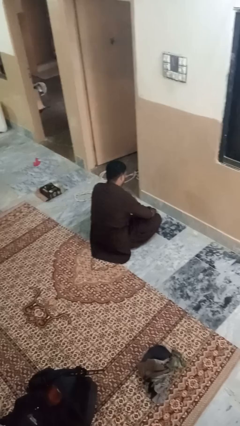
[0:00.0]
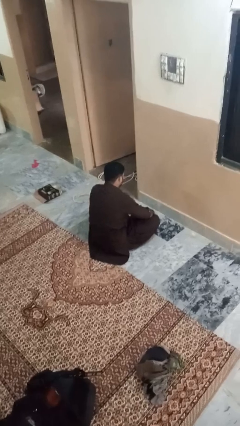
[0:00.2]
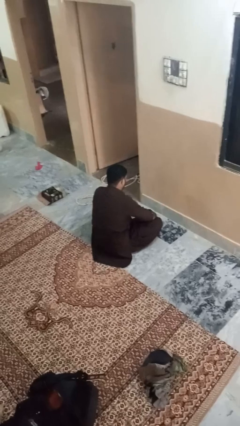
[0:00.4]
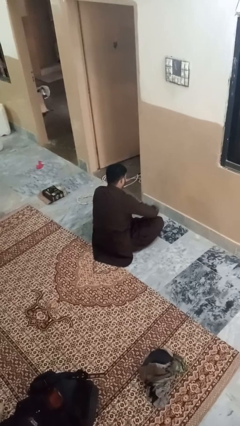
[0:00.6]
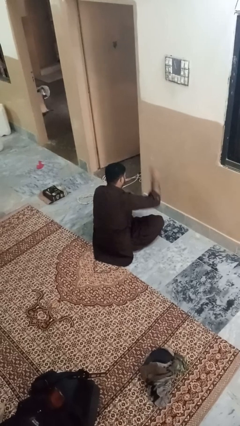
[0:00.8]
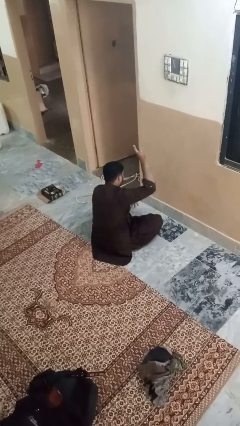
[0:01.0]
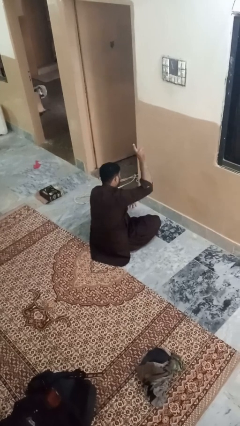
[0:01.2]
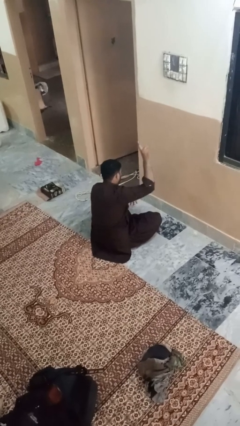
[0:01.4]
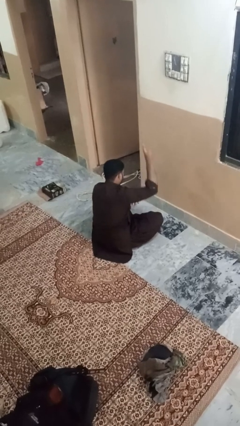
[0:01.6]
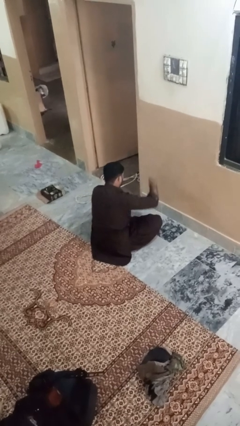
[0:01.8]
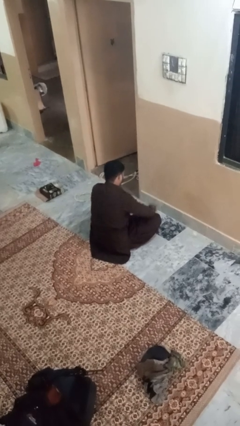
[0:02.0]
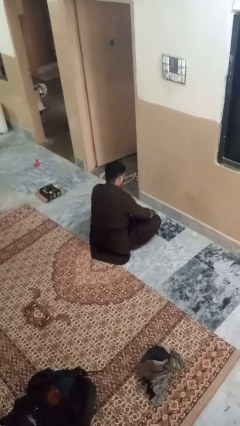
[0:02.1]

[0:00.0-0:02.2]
person gestures number one

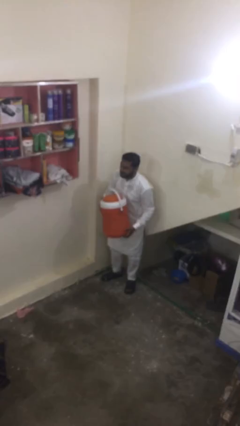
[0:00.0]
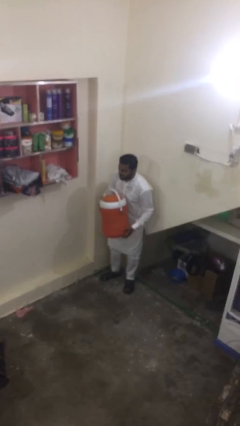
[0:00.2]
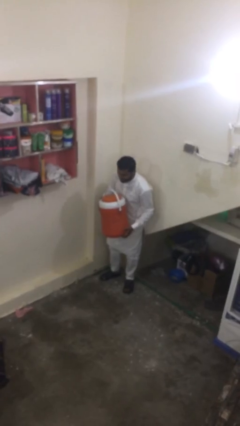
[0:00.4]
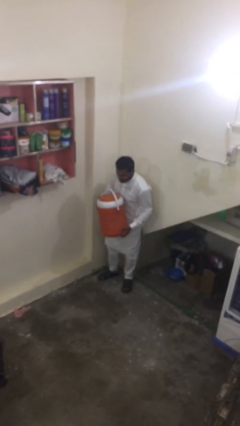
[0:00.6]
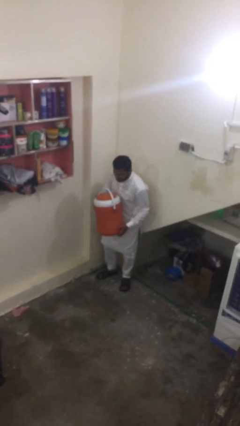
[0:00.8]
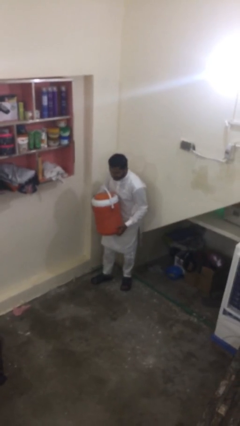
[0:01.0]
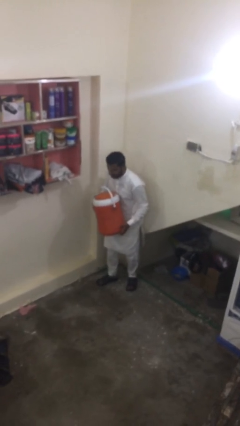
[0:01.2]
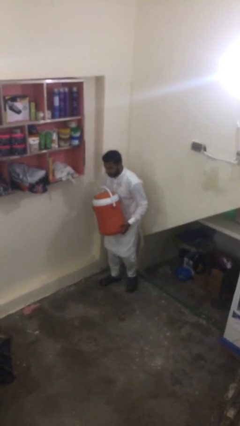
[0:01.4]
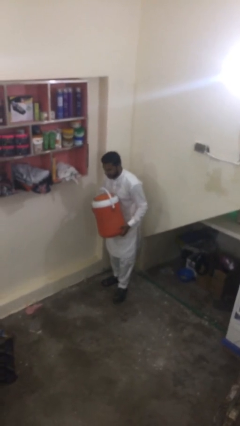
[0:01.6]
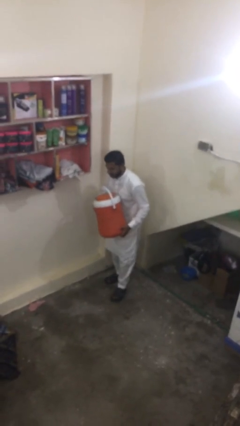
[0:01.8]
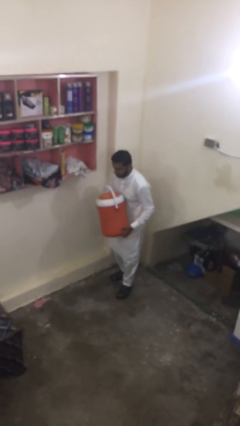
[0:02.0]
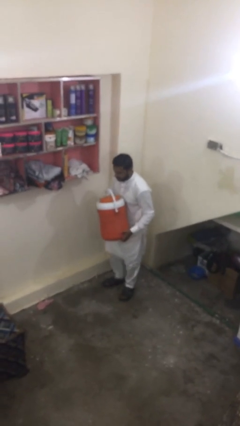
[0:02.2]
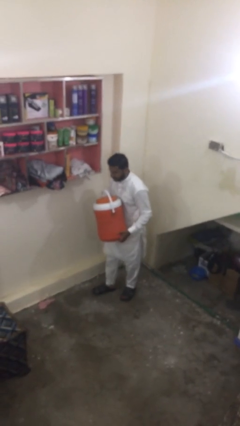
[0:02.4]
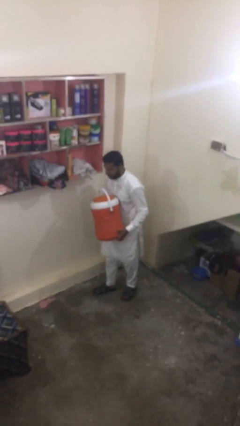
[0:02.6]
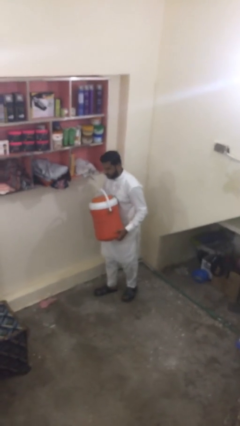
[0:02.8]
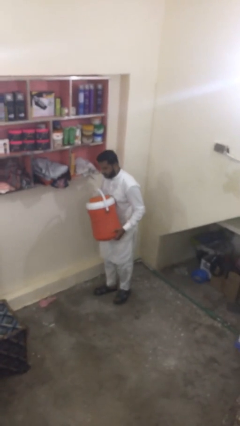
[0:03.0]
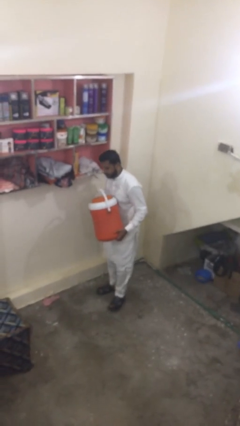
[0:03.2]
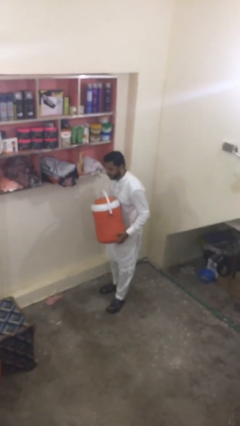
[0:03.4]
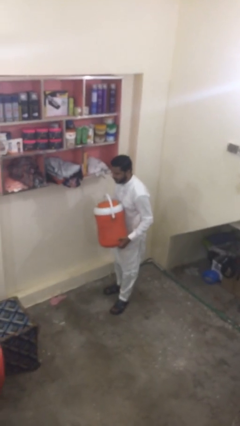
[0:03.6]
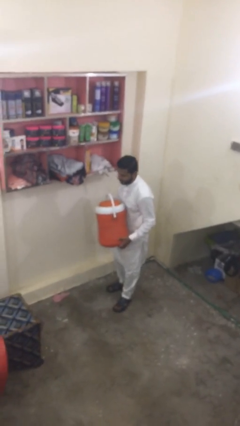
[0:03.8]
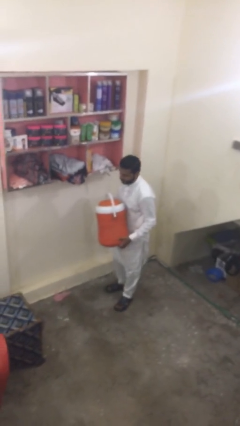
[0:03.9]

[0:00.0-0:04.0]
person carries heavy object

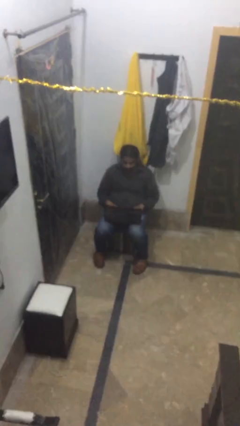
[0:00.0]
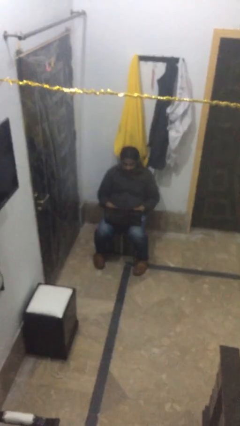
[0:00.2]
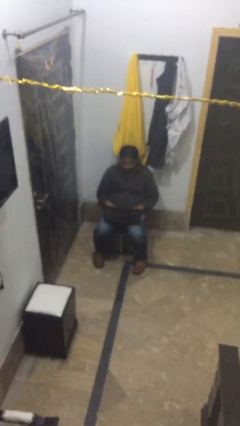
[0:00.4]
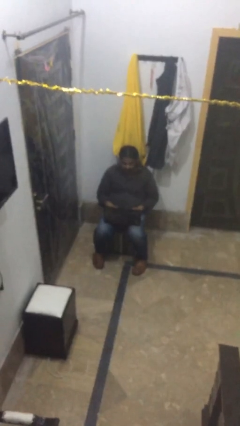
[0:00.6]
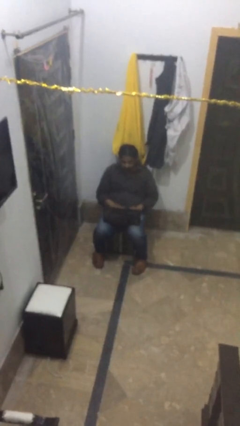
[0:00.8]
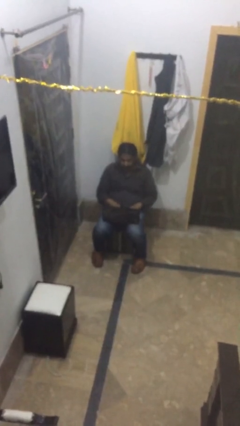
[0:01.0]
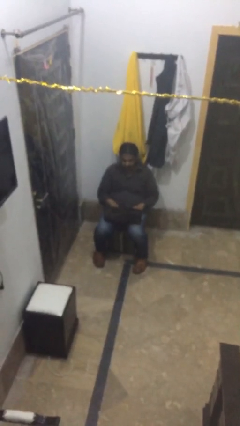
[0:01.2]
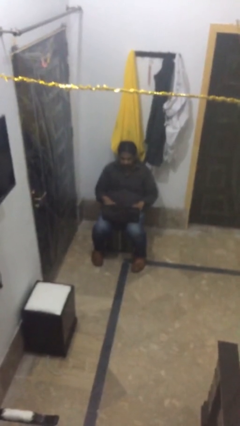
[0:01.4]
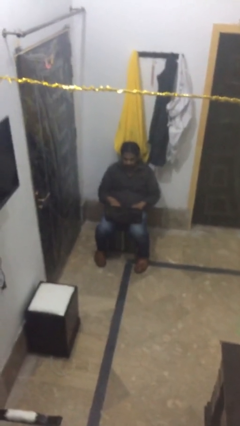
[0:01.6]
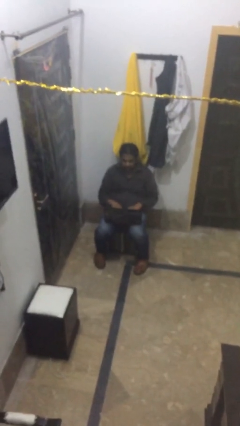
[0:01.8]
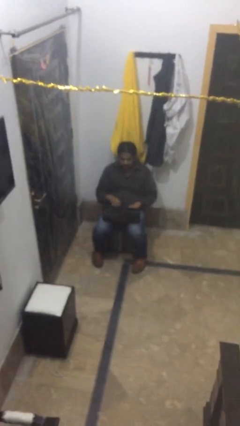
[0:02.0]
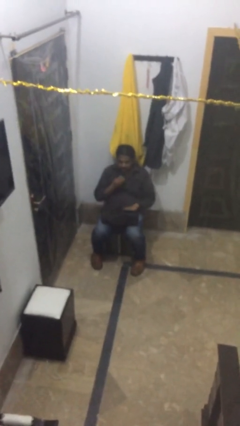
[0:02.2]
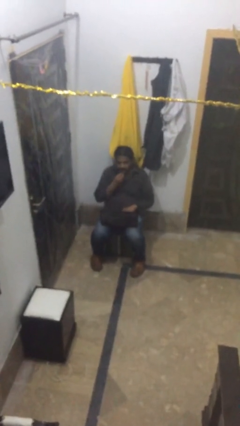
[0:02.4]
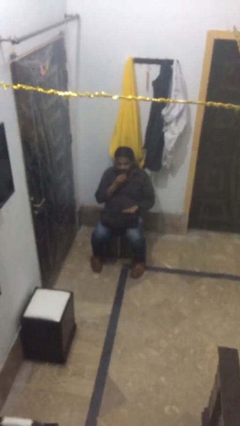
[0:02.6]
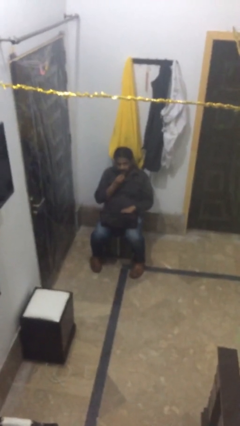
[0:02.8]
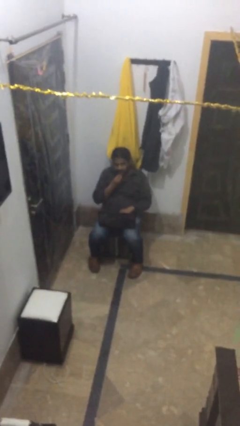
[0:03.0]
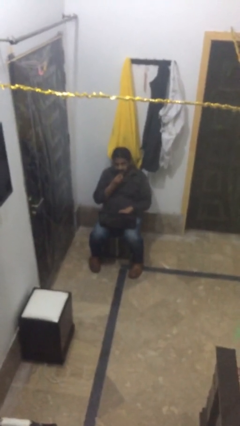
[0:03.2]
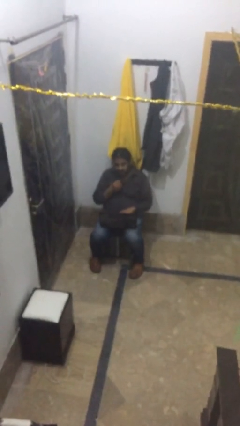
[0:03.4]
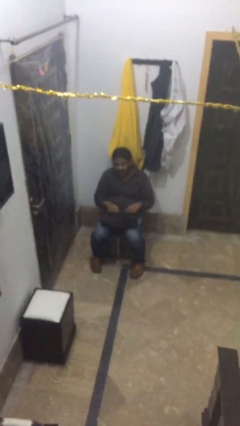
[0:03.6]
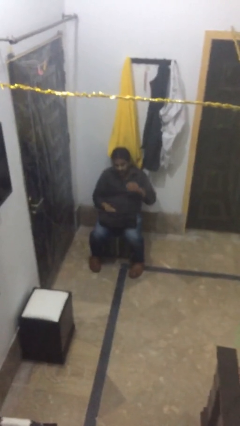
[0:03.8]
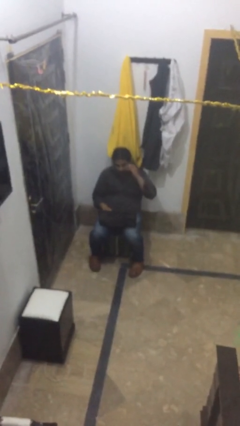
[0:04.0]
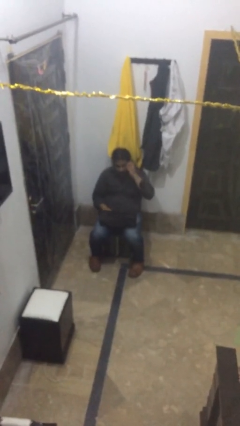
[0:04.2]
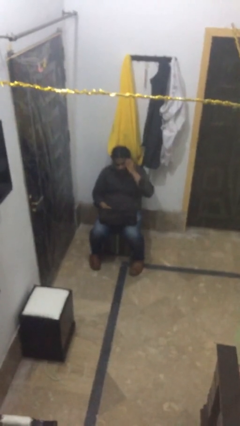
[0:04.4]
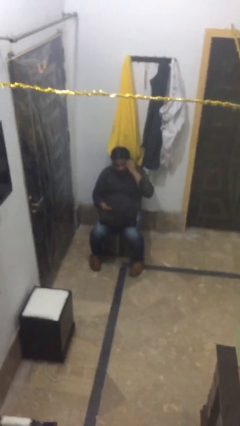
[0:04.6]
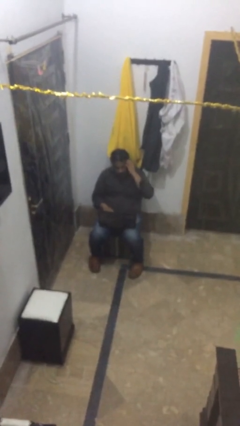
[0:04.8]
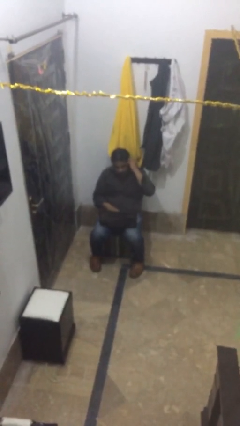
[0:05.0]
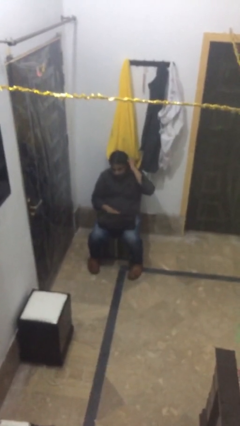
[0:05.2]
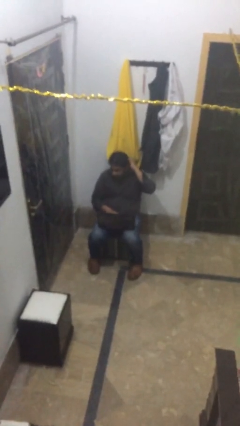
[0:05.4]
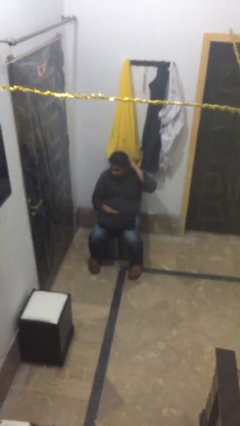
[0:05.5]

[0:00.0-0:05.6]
person interacts with laptop

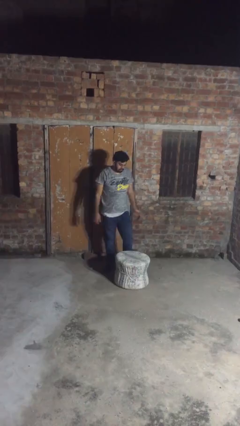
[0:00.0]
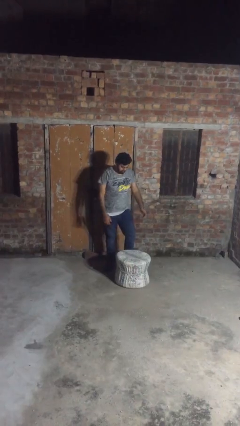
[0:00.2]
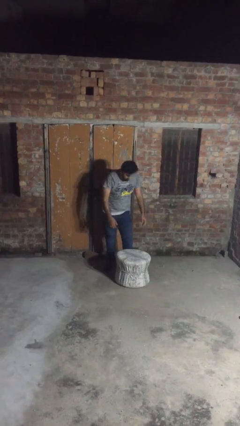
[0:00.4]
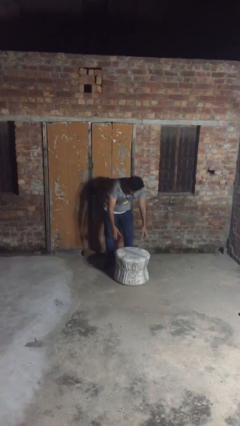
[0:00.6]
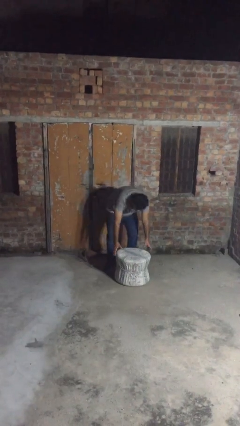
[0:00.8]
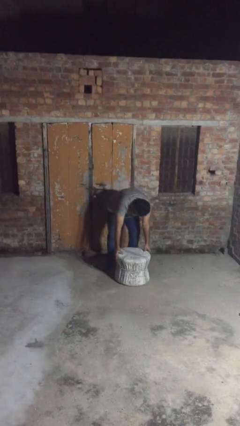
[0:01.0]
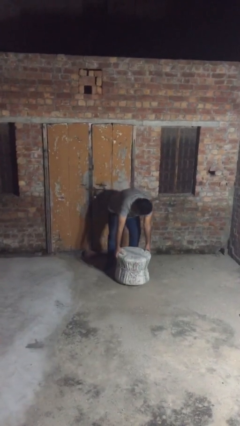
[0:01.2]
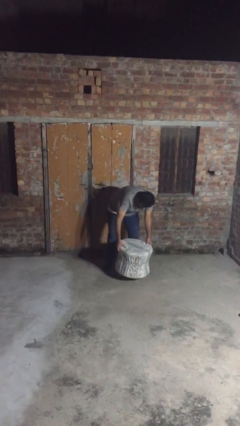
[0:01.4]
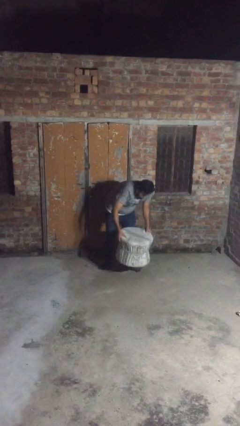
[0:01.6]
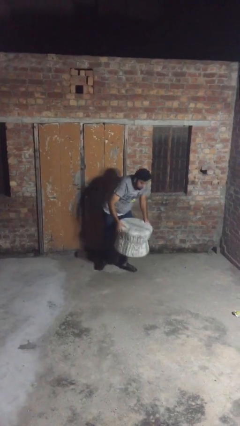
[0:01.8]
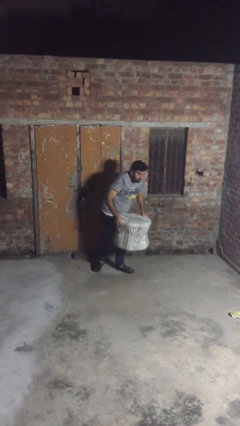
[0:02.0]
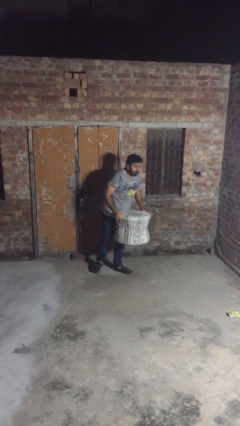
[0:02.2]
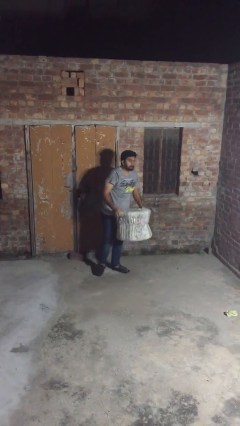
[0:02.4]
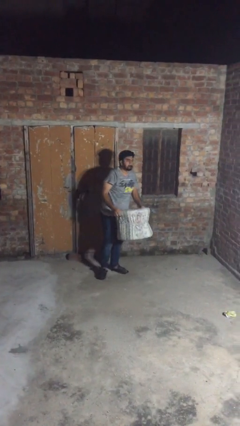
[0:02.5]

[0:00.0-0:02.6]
person picks up object from floor

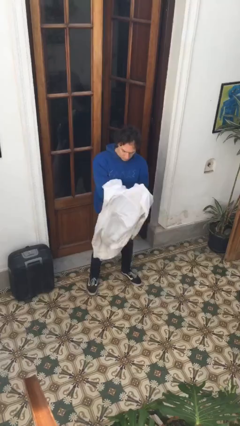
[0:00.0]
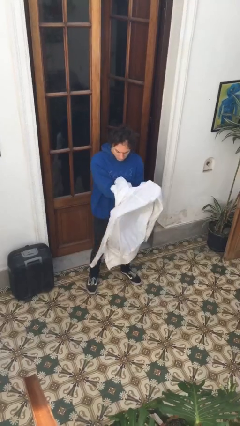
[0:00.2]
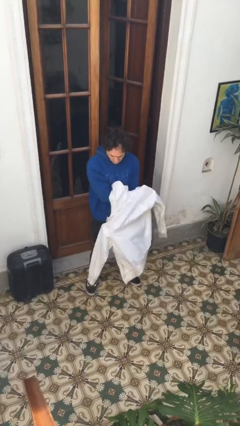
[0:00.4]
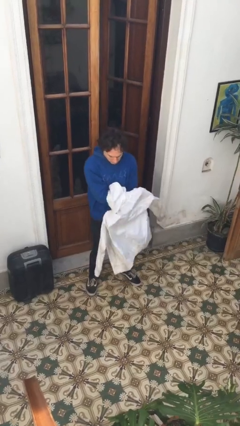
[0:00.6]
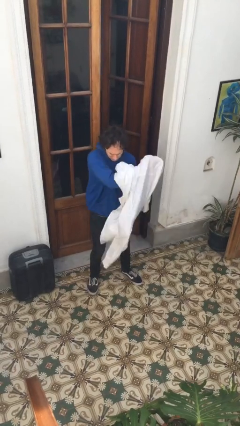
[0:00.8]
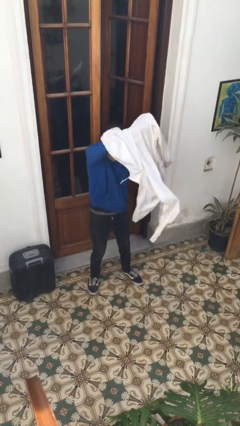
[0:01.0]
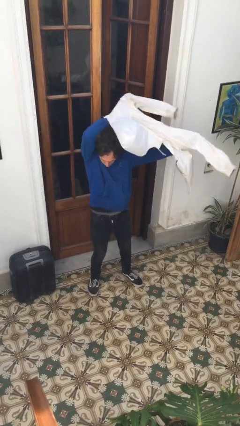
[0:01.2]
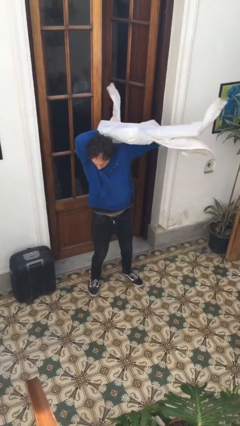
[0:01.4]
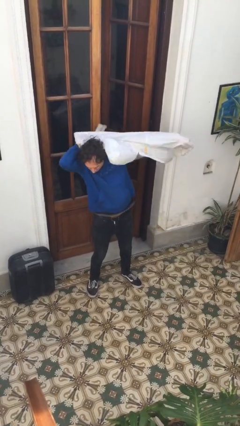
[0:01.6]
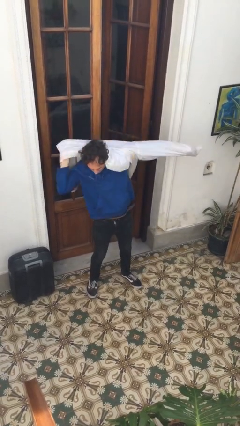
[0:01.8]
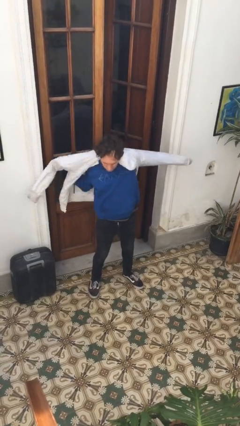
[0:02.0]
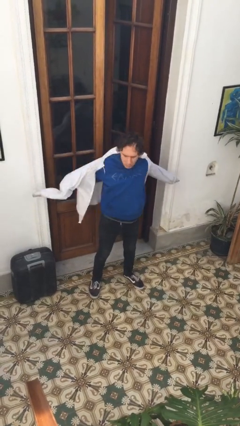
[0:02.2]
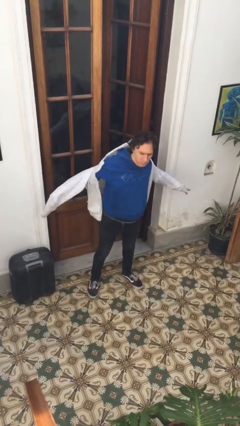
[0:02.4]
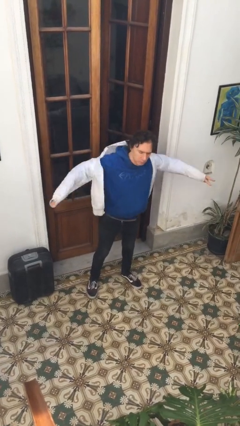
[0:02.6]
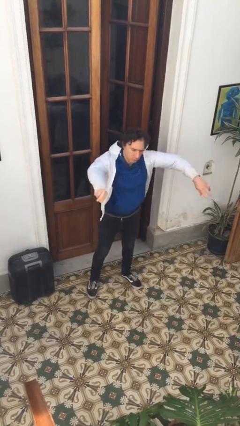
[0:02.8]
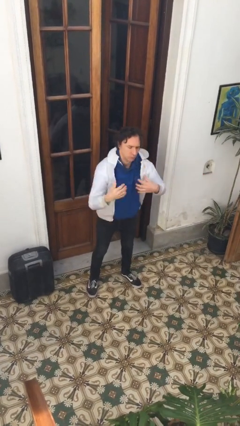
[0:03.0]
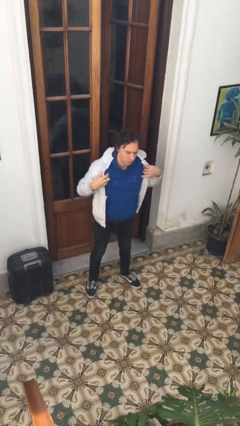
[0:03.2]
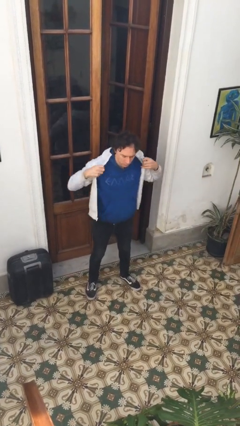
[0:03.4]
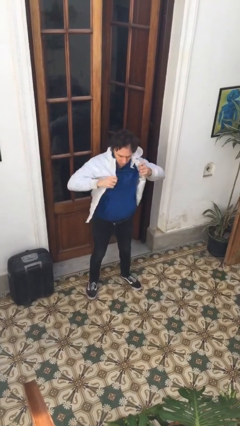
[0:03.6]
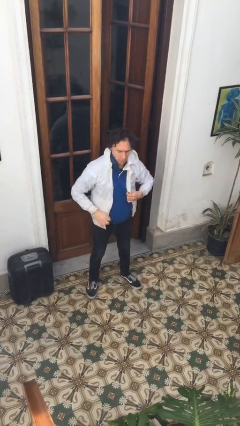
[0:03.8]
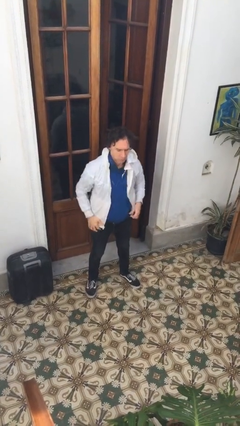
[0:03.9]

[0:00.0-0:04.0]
person puts on jacket
